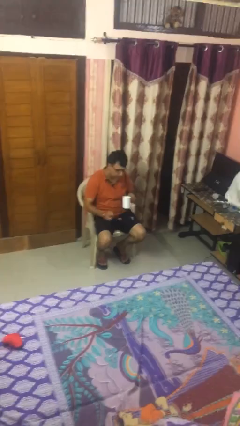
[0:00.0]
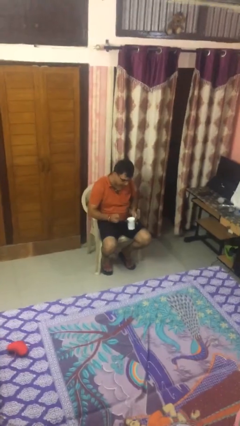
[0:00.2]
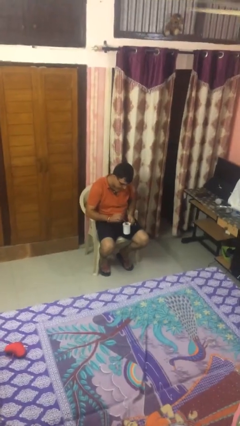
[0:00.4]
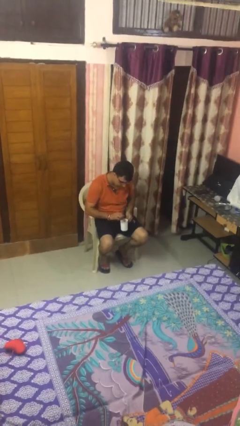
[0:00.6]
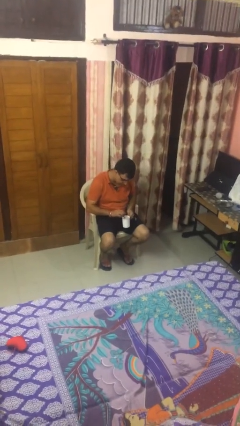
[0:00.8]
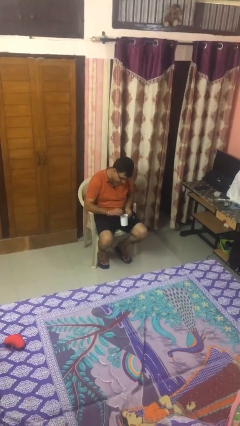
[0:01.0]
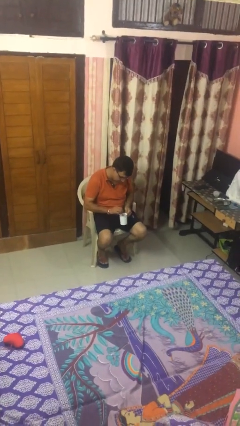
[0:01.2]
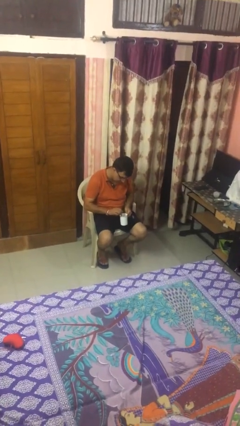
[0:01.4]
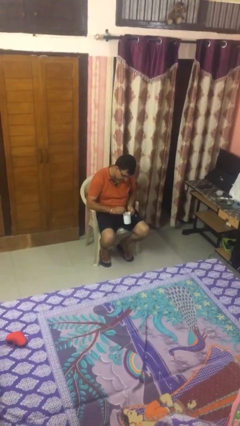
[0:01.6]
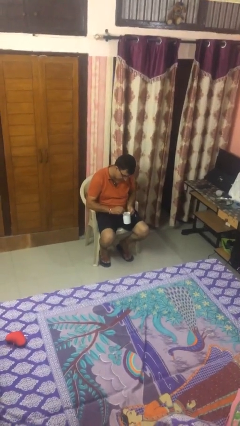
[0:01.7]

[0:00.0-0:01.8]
person stirs mug

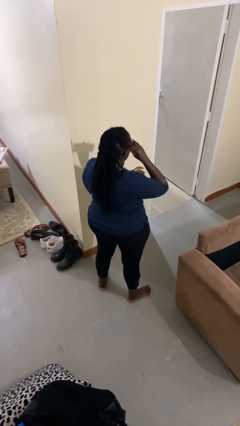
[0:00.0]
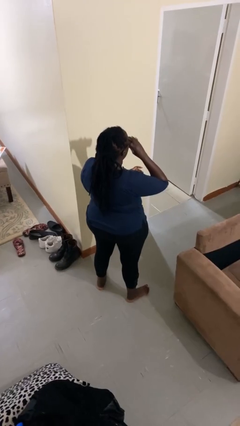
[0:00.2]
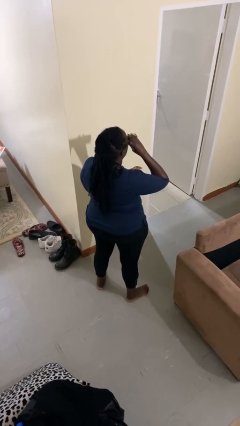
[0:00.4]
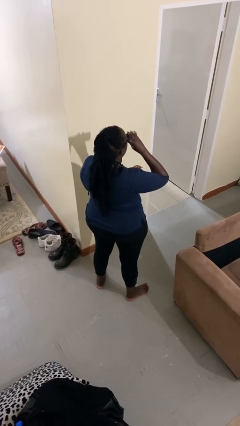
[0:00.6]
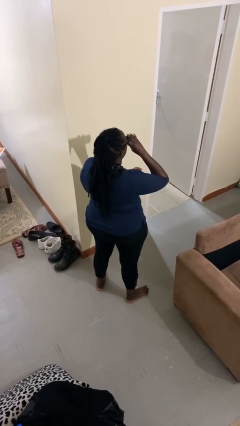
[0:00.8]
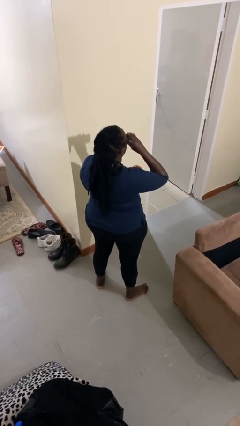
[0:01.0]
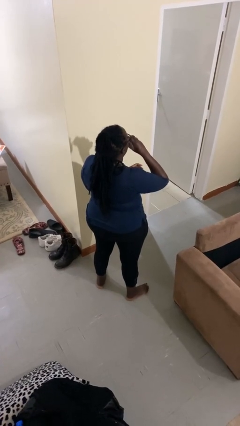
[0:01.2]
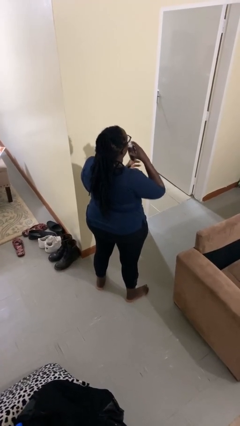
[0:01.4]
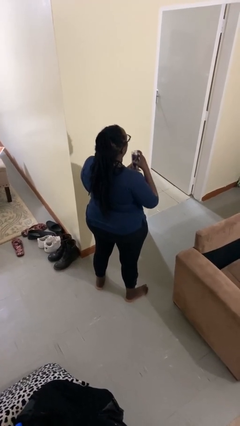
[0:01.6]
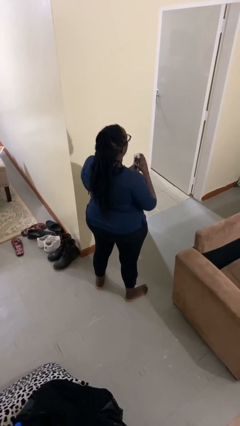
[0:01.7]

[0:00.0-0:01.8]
person drinks from beverage can

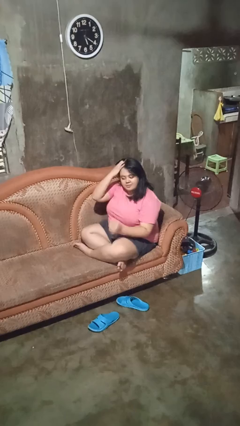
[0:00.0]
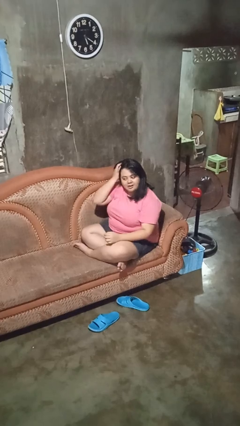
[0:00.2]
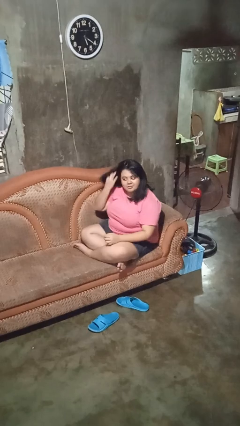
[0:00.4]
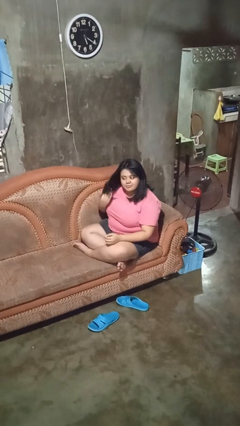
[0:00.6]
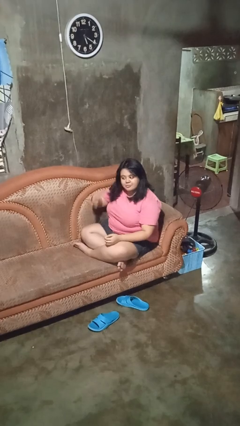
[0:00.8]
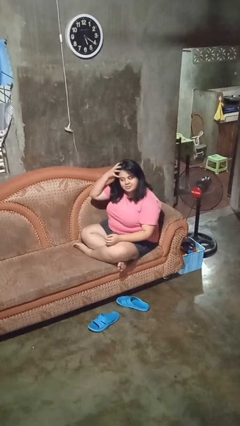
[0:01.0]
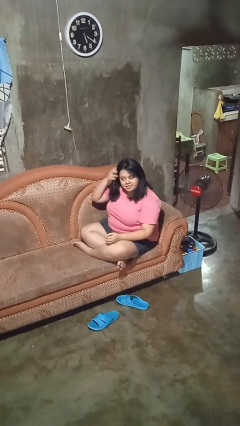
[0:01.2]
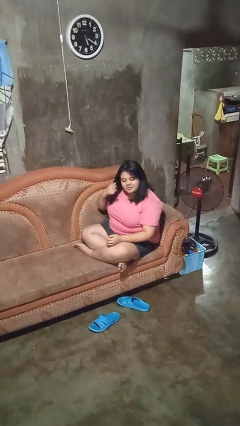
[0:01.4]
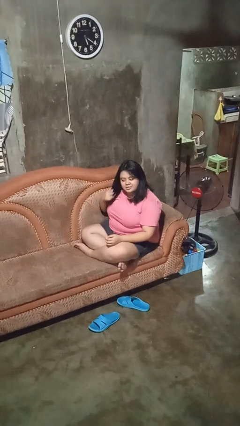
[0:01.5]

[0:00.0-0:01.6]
person strokes hair

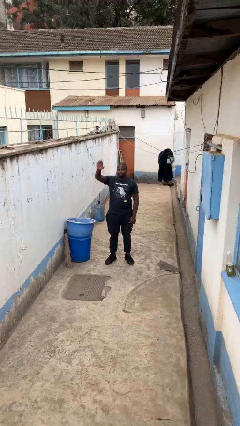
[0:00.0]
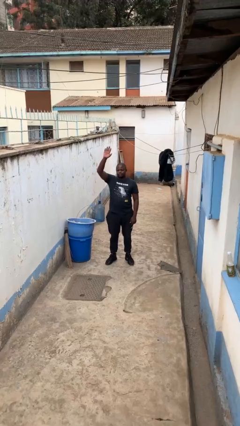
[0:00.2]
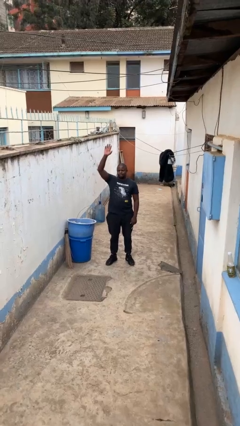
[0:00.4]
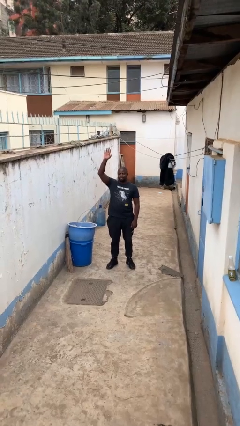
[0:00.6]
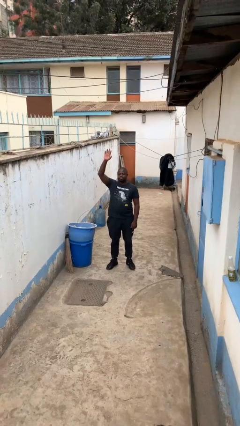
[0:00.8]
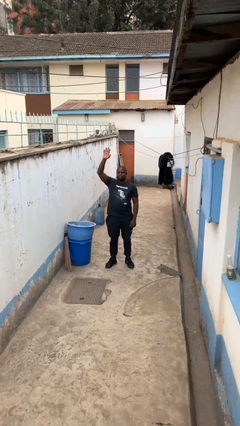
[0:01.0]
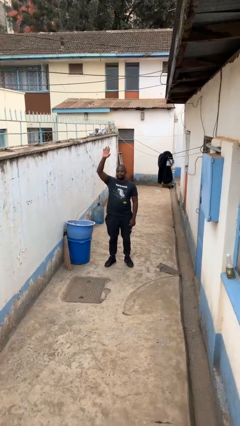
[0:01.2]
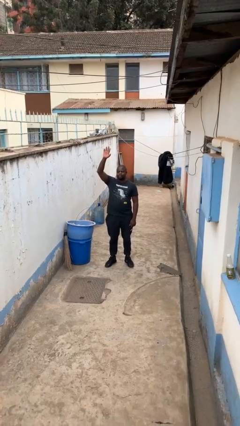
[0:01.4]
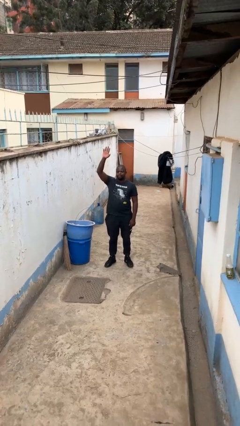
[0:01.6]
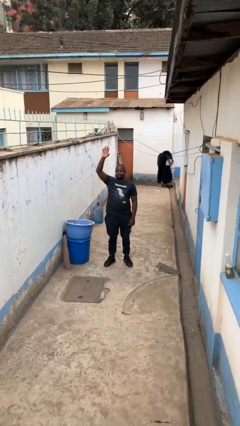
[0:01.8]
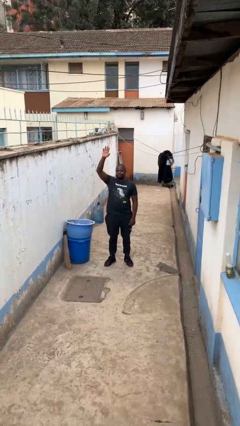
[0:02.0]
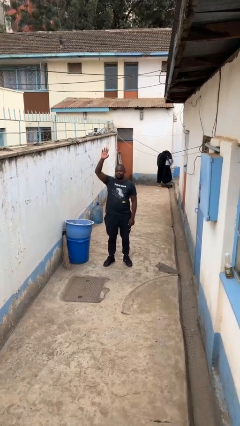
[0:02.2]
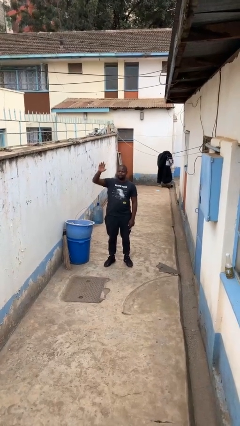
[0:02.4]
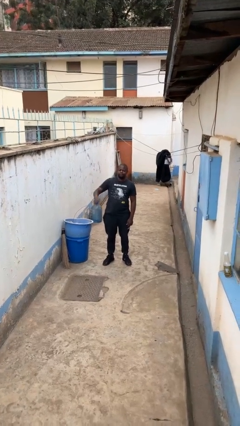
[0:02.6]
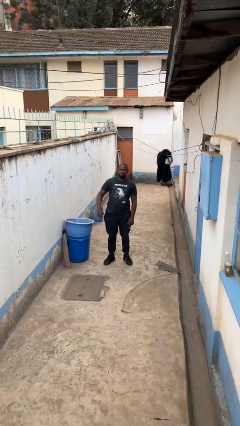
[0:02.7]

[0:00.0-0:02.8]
person gestures raise hand

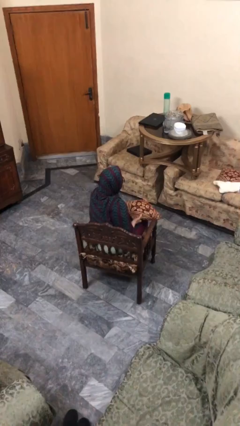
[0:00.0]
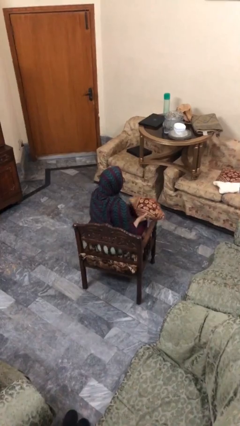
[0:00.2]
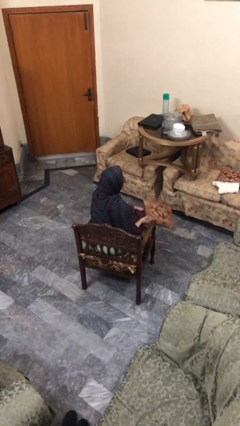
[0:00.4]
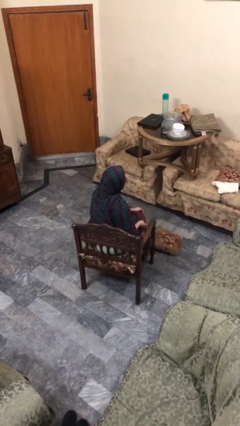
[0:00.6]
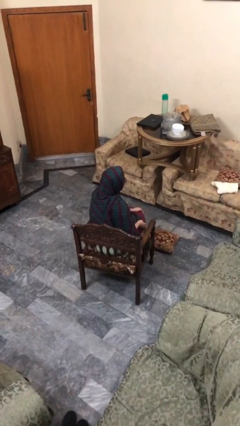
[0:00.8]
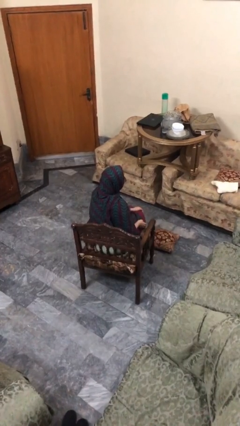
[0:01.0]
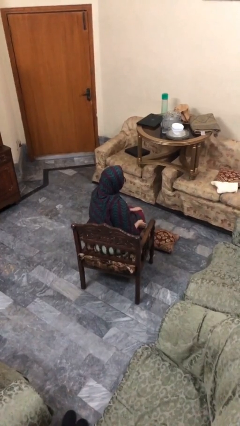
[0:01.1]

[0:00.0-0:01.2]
person drops object

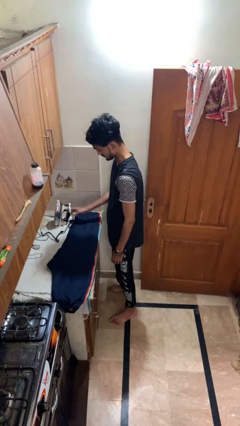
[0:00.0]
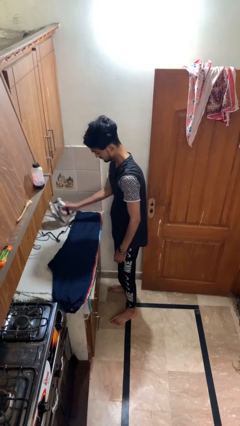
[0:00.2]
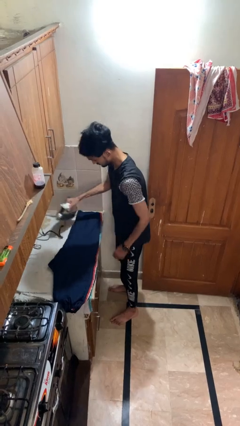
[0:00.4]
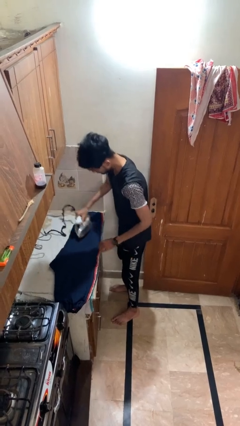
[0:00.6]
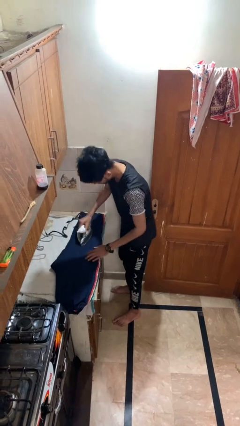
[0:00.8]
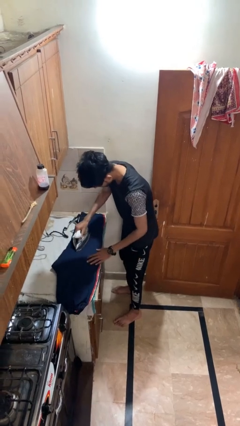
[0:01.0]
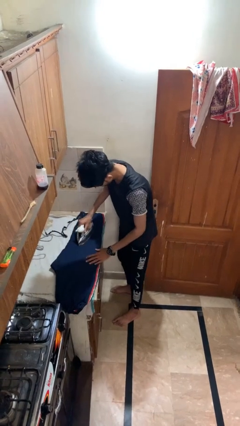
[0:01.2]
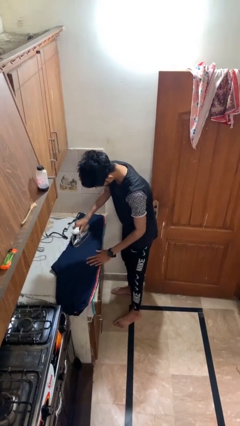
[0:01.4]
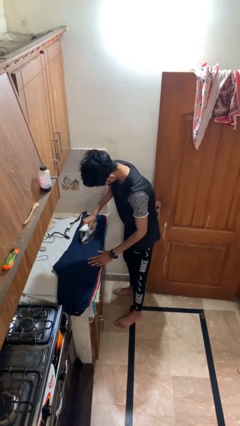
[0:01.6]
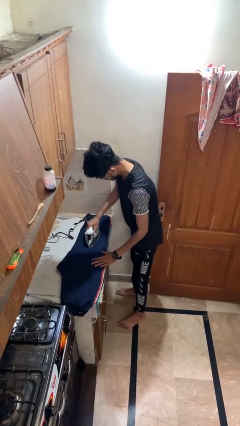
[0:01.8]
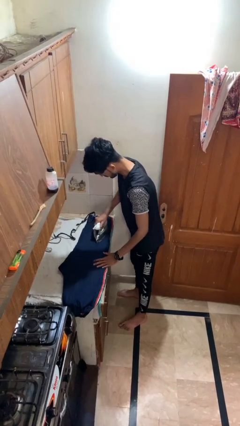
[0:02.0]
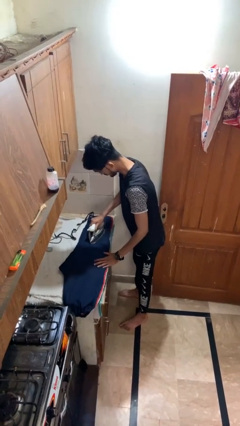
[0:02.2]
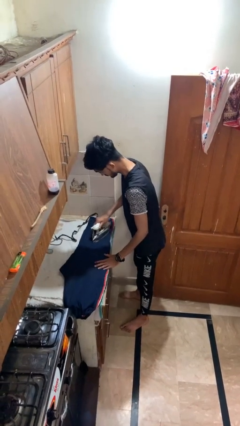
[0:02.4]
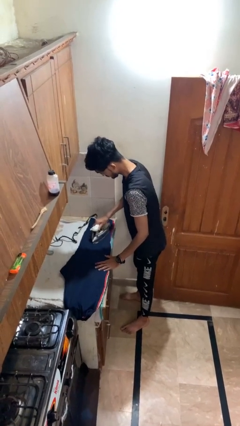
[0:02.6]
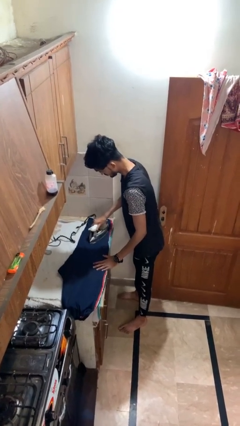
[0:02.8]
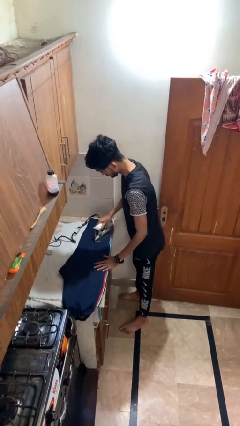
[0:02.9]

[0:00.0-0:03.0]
person irons clothes

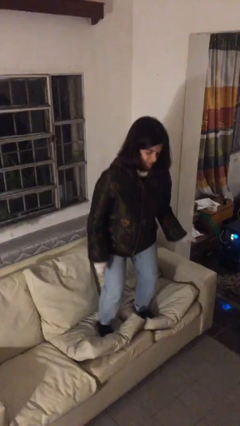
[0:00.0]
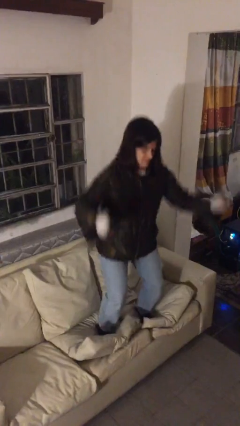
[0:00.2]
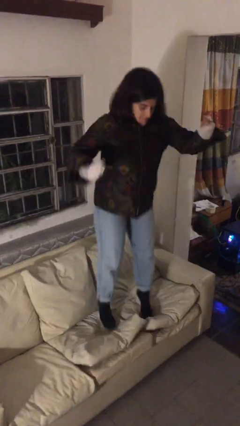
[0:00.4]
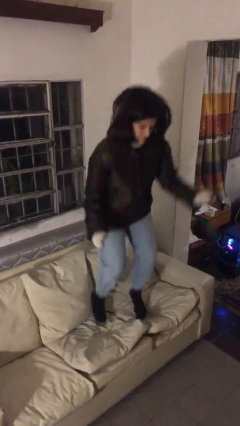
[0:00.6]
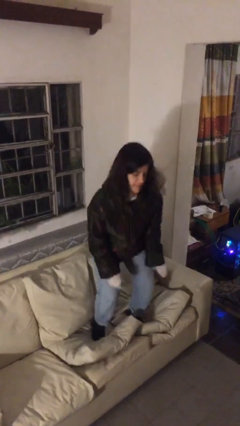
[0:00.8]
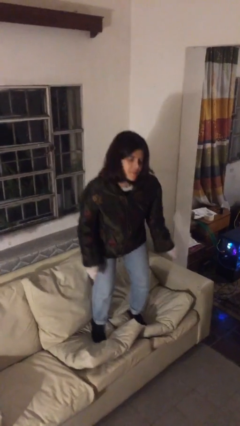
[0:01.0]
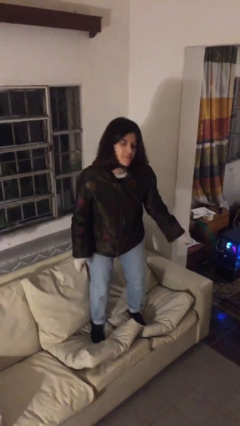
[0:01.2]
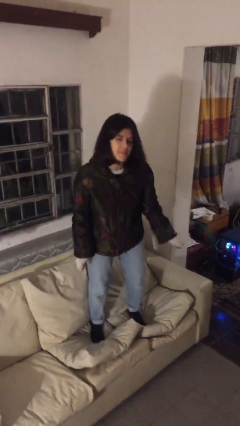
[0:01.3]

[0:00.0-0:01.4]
person jumps on couch

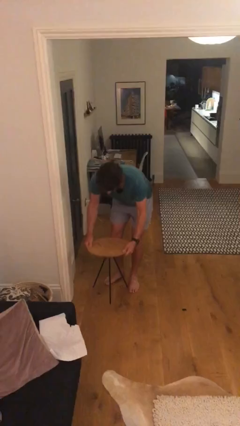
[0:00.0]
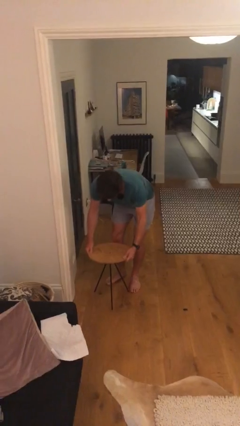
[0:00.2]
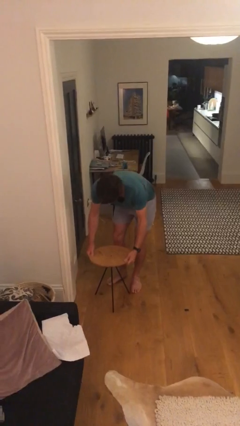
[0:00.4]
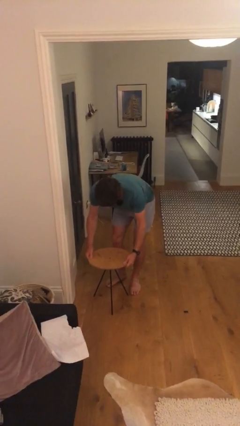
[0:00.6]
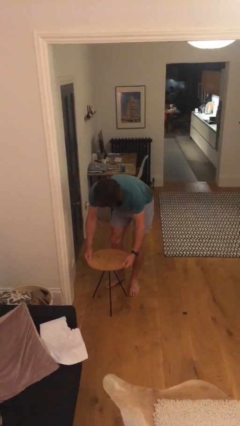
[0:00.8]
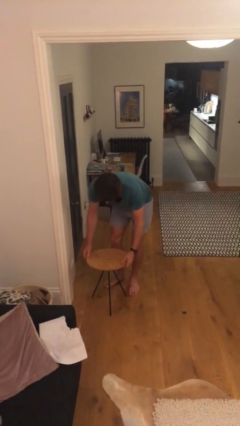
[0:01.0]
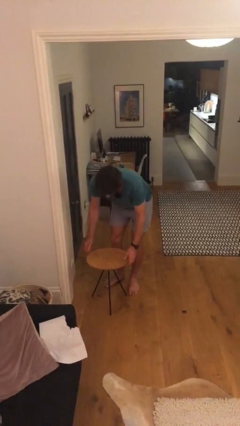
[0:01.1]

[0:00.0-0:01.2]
person puts down object on floor

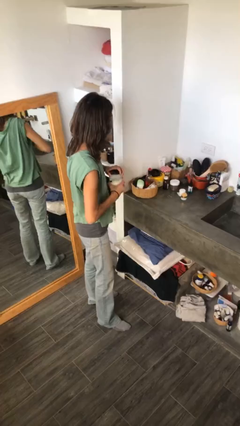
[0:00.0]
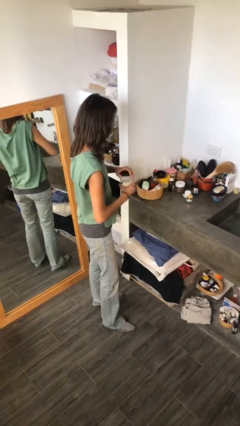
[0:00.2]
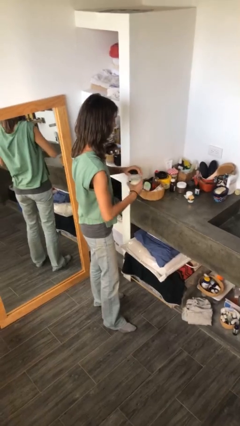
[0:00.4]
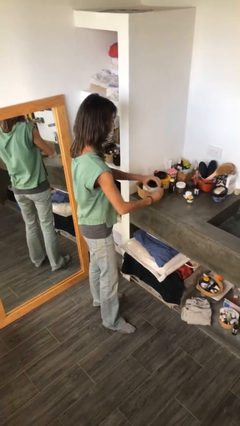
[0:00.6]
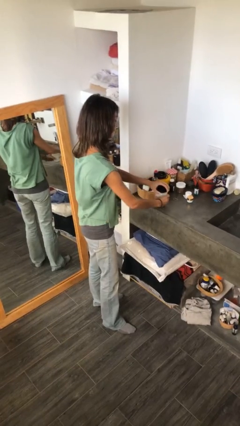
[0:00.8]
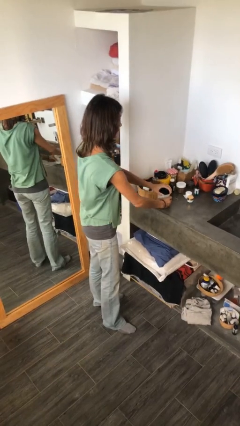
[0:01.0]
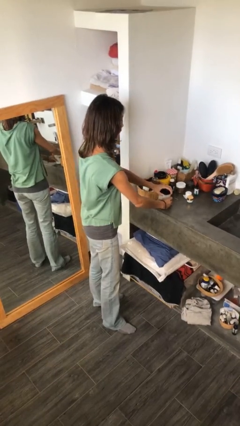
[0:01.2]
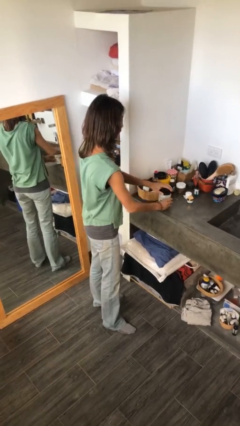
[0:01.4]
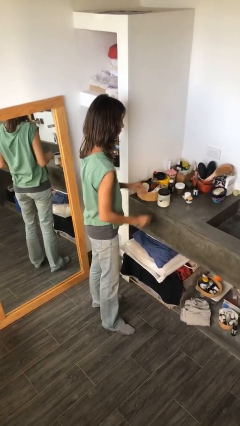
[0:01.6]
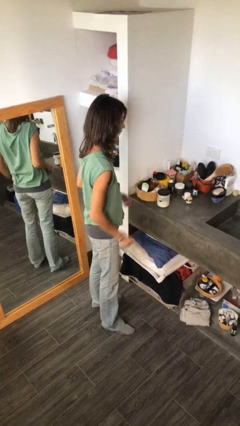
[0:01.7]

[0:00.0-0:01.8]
person puts down object on countertop

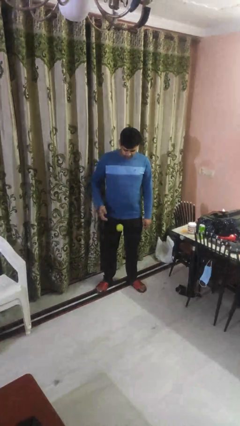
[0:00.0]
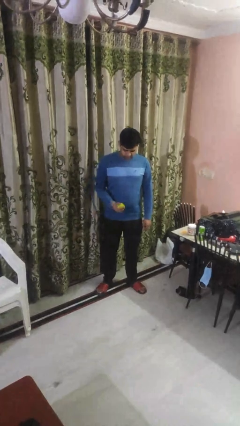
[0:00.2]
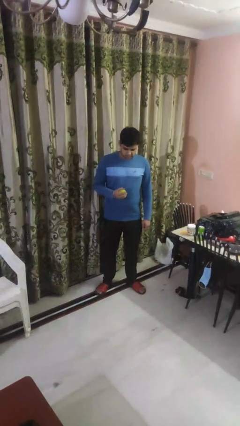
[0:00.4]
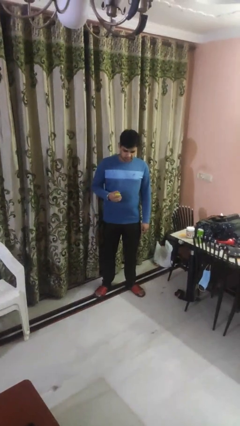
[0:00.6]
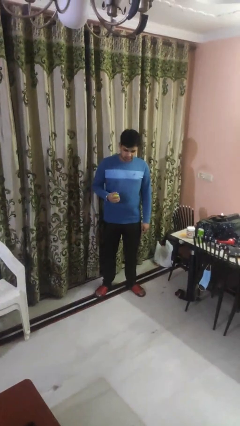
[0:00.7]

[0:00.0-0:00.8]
person bounces ball on floor
